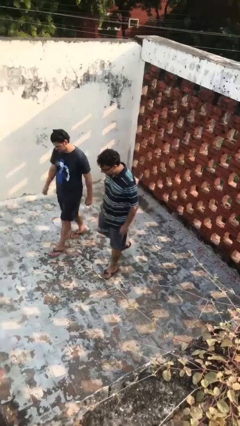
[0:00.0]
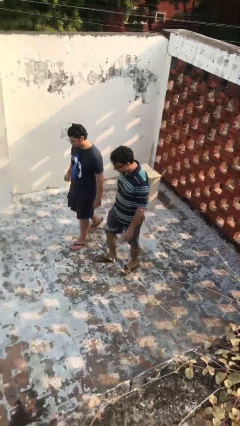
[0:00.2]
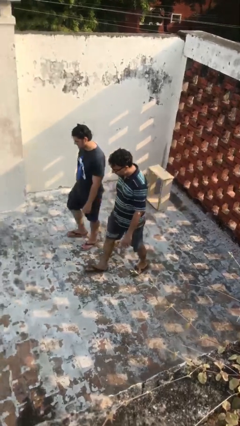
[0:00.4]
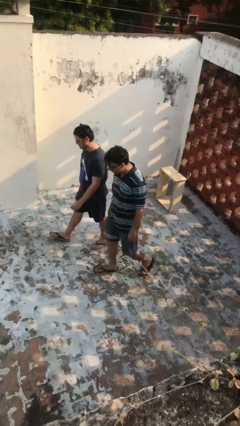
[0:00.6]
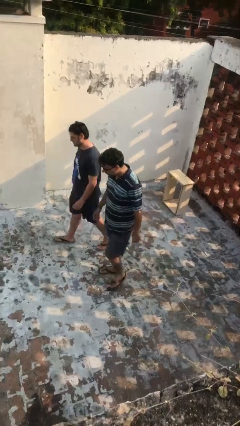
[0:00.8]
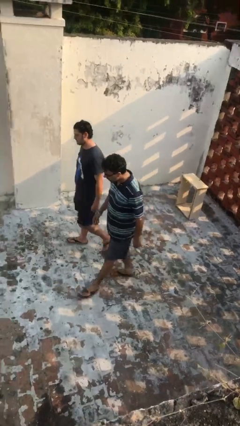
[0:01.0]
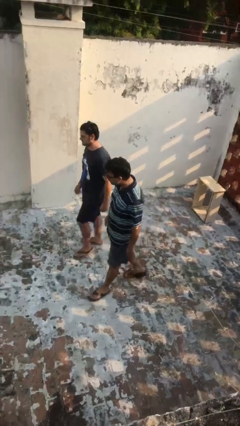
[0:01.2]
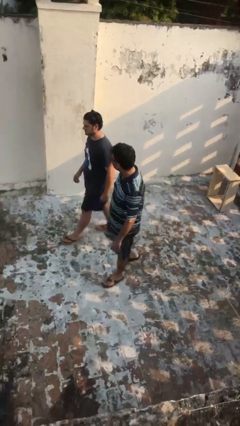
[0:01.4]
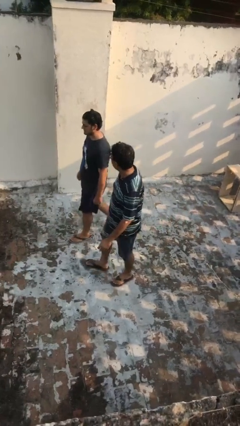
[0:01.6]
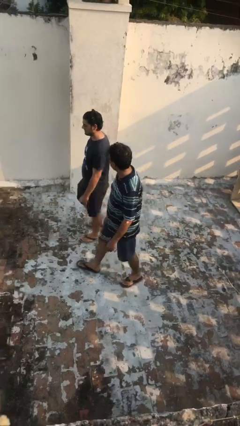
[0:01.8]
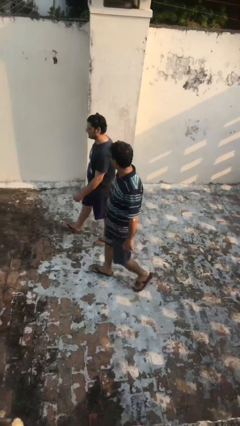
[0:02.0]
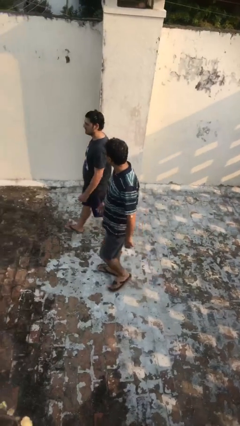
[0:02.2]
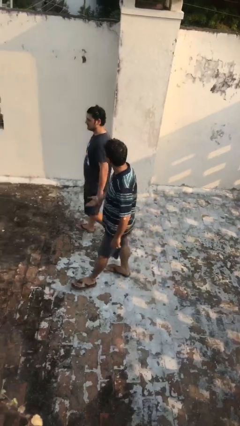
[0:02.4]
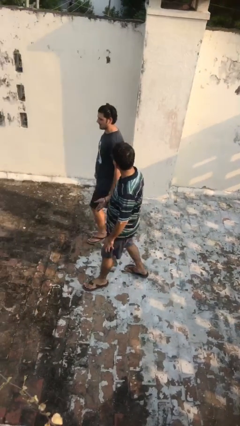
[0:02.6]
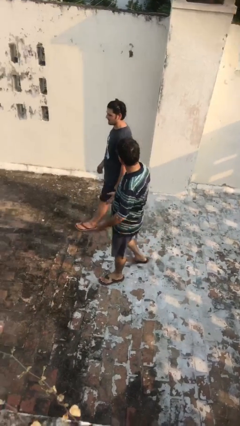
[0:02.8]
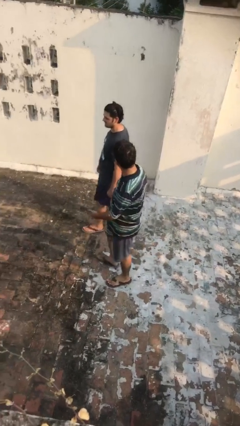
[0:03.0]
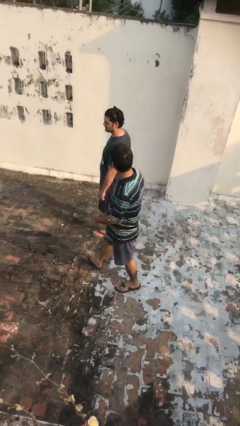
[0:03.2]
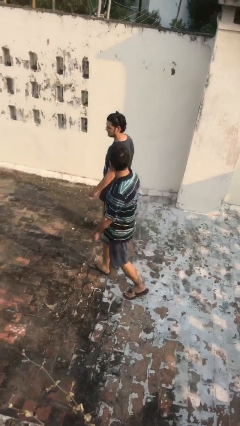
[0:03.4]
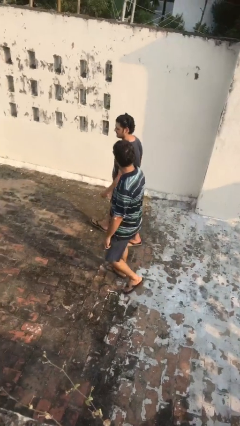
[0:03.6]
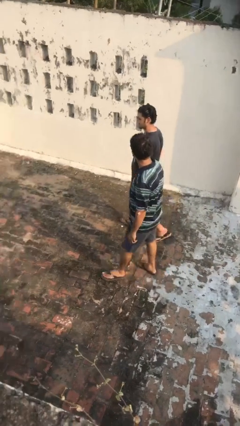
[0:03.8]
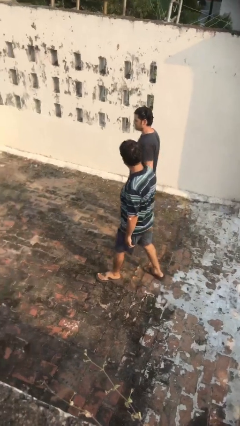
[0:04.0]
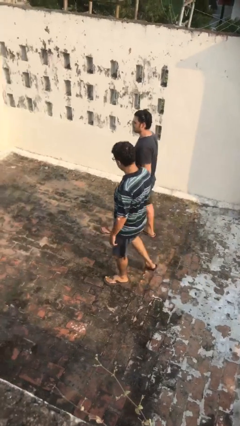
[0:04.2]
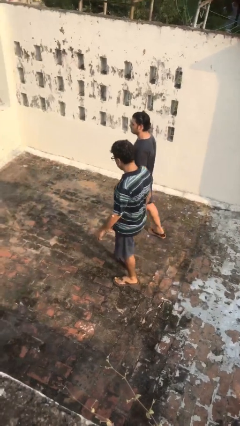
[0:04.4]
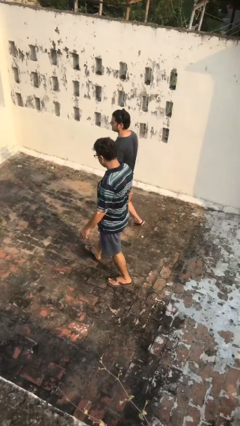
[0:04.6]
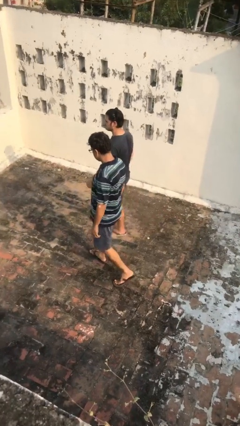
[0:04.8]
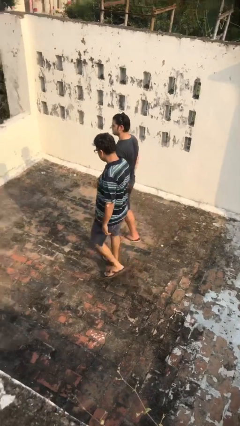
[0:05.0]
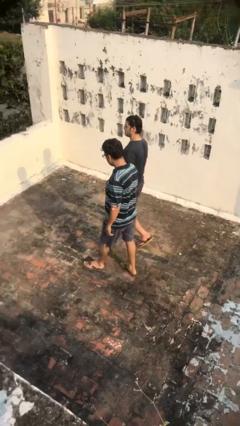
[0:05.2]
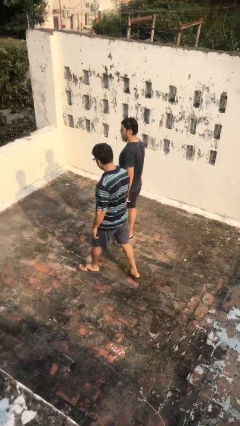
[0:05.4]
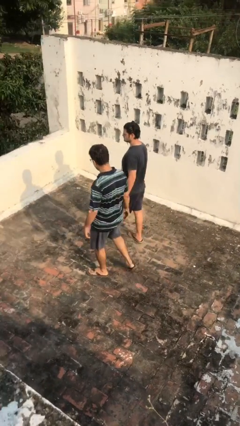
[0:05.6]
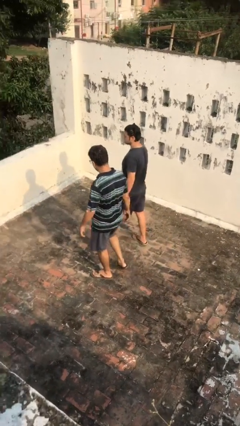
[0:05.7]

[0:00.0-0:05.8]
person talks to person

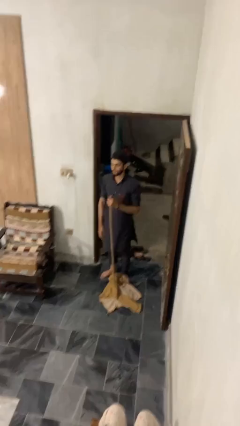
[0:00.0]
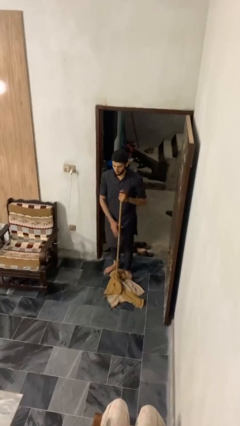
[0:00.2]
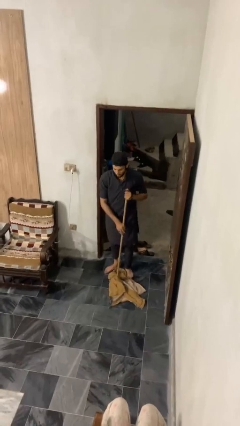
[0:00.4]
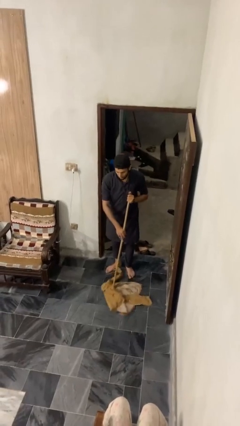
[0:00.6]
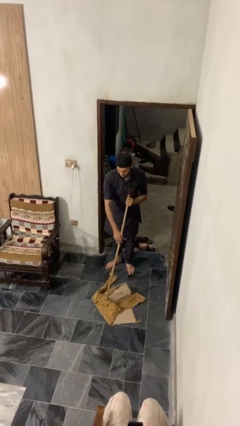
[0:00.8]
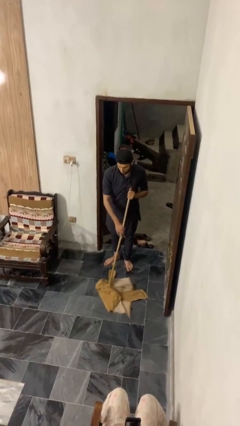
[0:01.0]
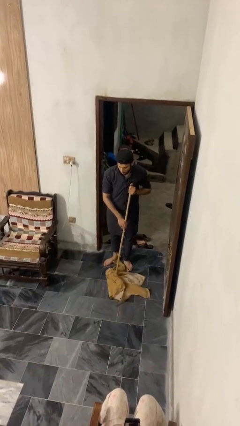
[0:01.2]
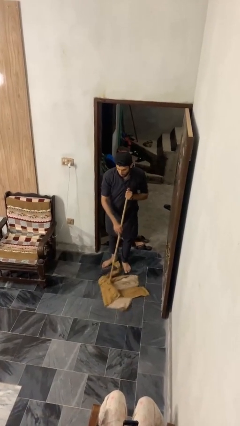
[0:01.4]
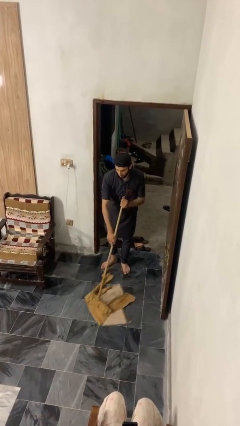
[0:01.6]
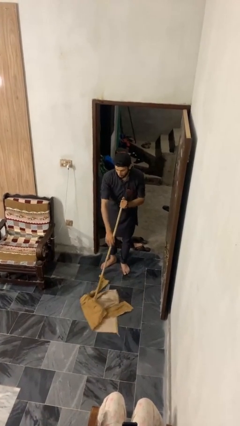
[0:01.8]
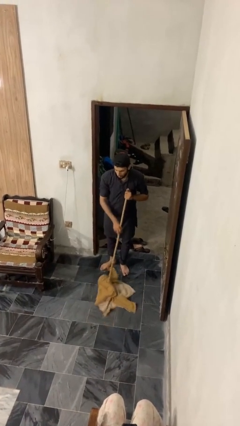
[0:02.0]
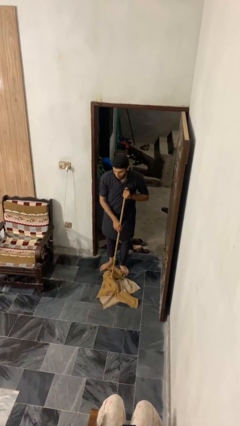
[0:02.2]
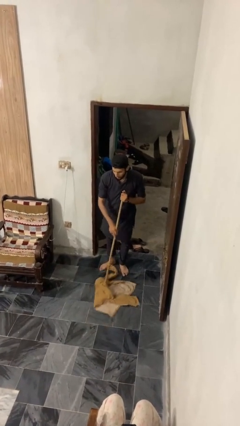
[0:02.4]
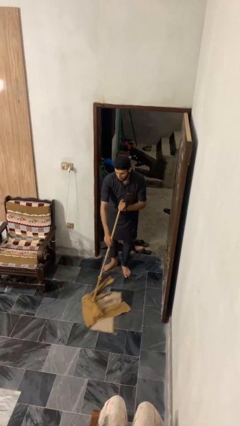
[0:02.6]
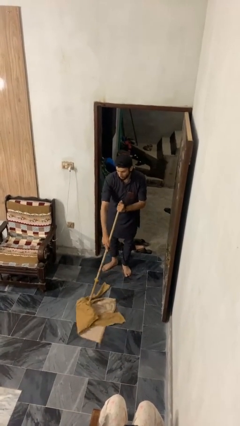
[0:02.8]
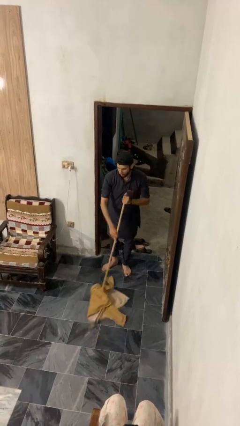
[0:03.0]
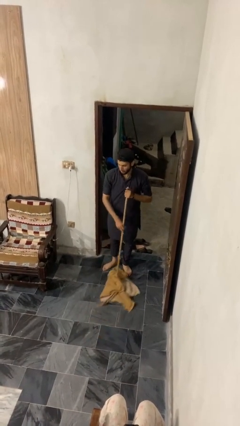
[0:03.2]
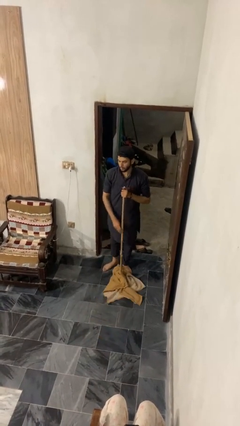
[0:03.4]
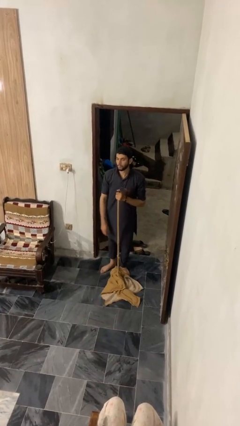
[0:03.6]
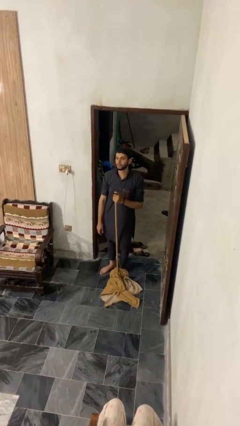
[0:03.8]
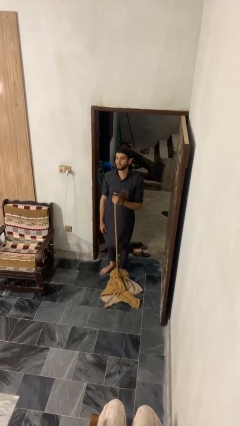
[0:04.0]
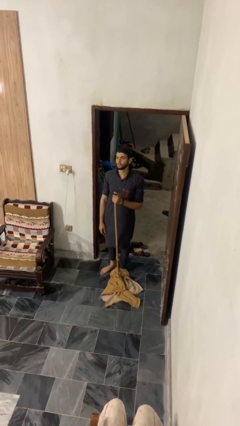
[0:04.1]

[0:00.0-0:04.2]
person mops

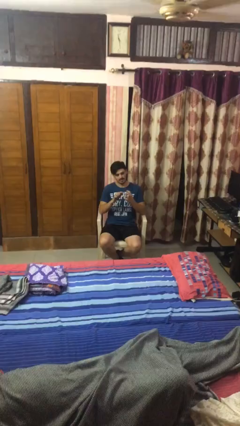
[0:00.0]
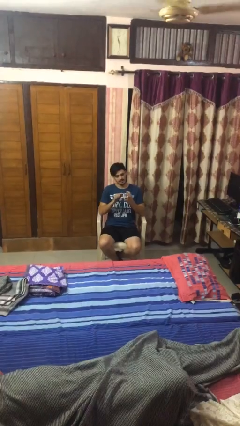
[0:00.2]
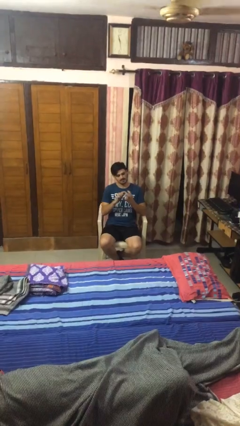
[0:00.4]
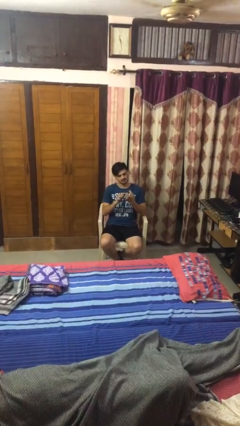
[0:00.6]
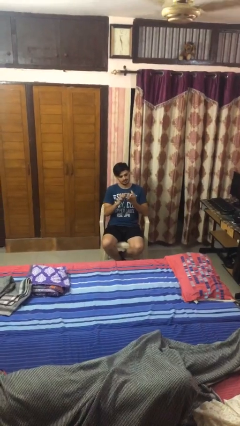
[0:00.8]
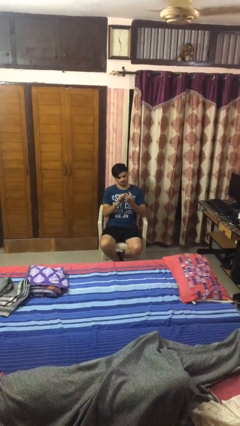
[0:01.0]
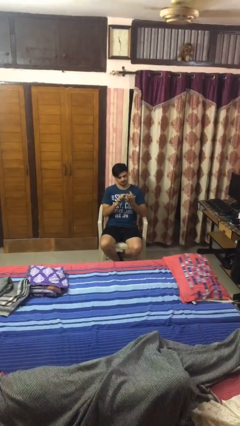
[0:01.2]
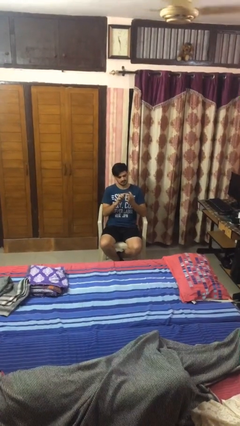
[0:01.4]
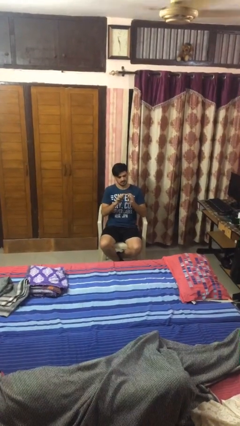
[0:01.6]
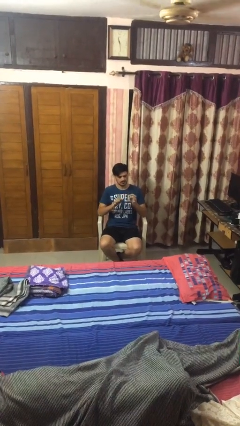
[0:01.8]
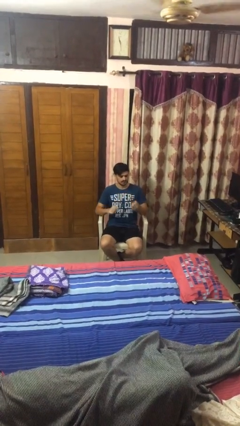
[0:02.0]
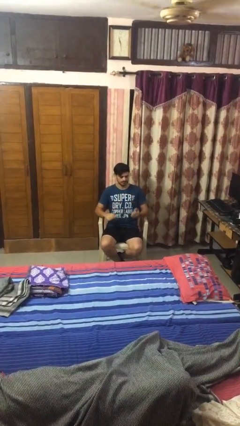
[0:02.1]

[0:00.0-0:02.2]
person files fingernails

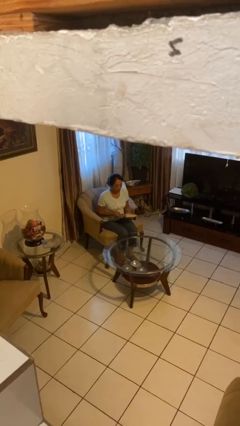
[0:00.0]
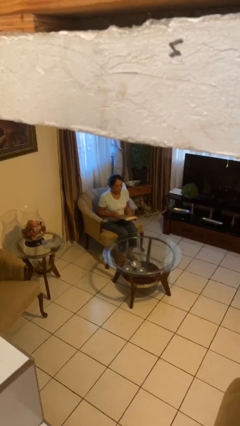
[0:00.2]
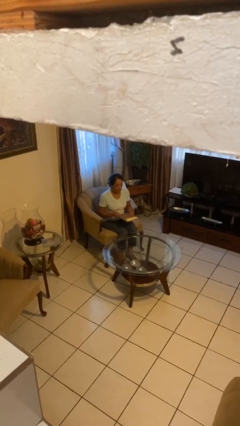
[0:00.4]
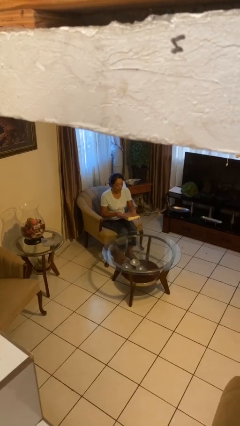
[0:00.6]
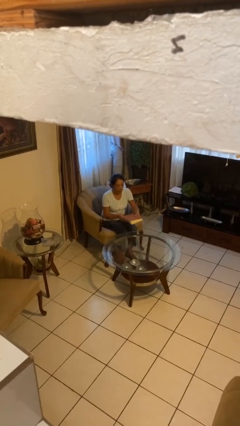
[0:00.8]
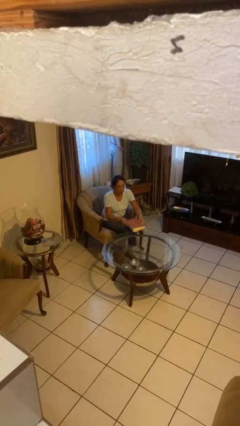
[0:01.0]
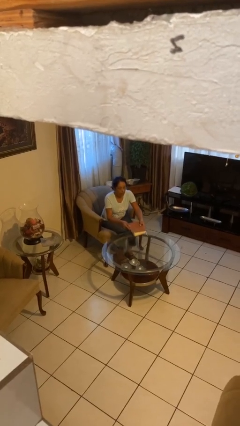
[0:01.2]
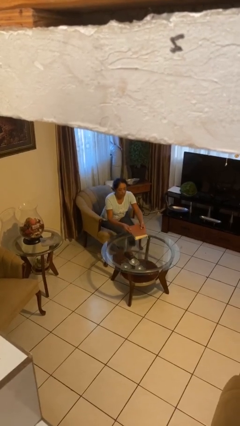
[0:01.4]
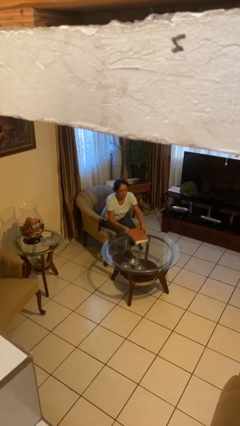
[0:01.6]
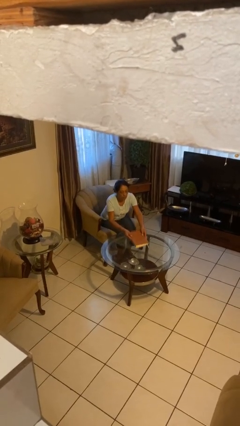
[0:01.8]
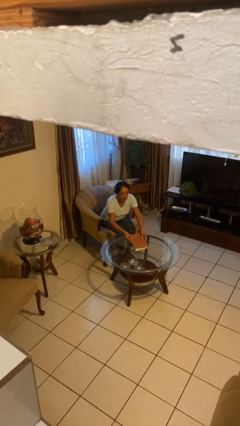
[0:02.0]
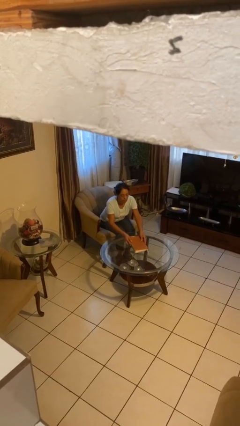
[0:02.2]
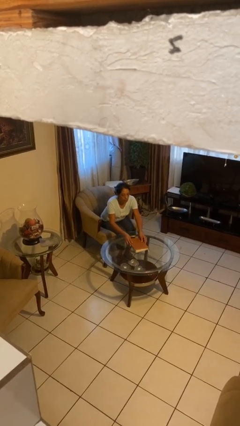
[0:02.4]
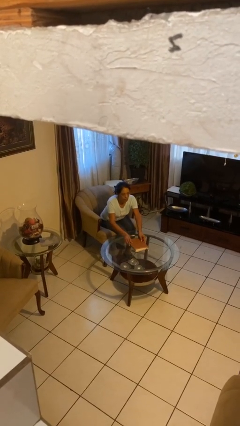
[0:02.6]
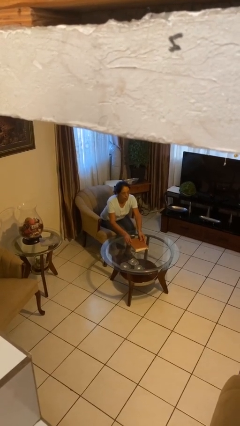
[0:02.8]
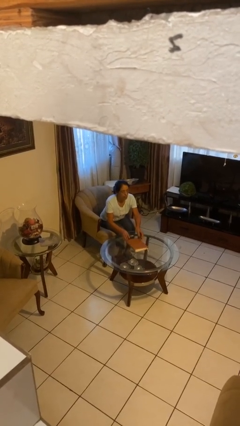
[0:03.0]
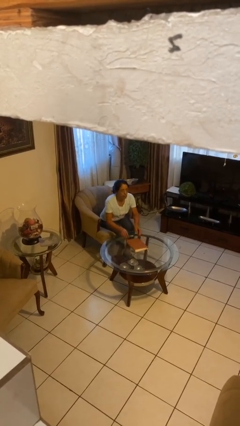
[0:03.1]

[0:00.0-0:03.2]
person puts down object on table

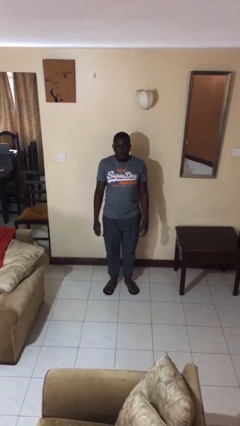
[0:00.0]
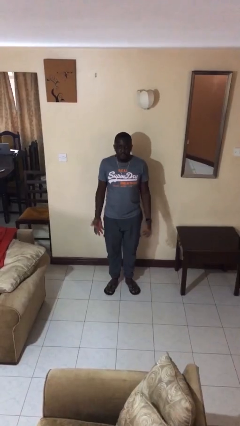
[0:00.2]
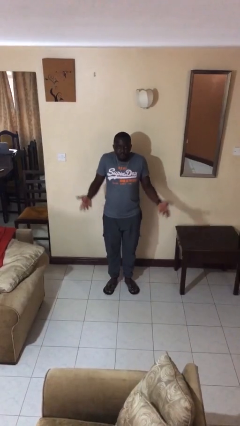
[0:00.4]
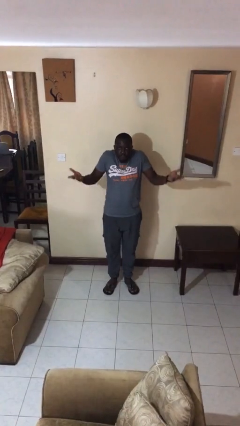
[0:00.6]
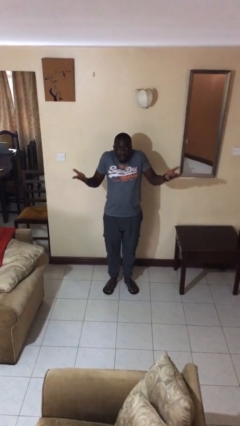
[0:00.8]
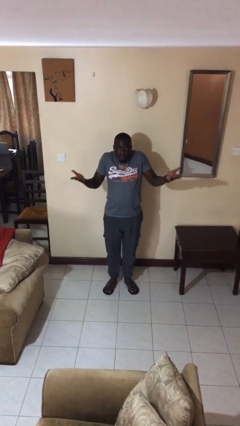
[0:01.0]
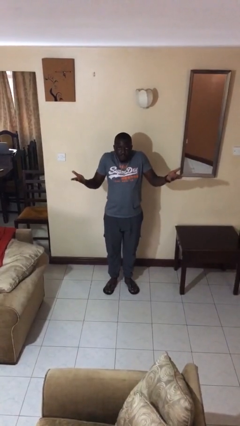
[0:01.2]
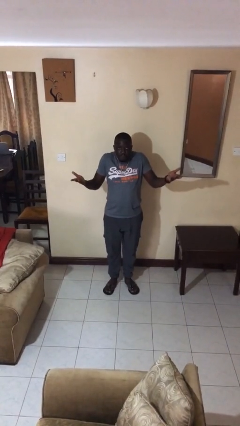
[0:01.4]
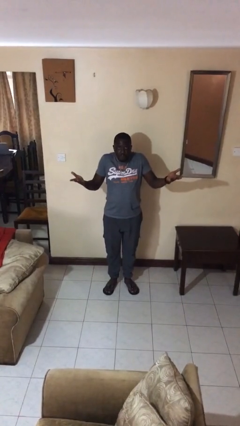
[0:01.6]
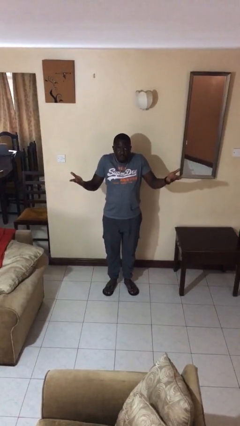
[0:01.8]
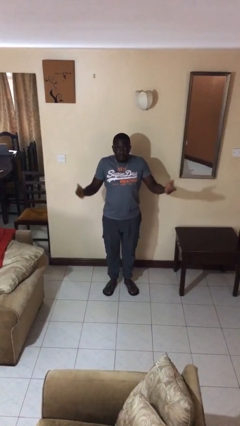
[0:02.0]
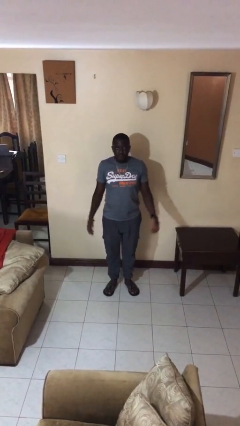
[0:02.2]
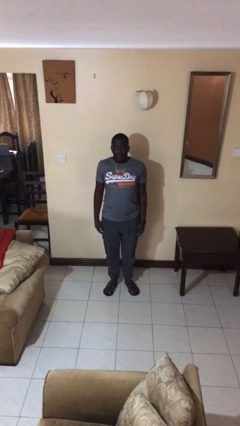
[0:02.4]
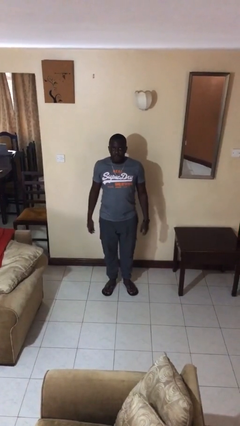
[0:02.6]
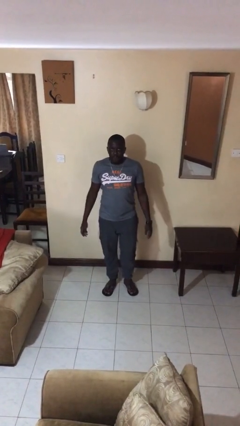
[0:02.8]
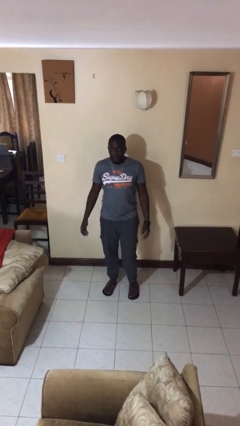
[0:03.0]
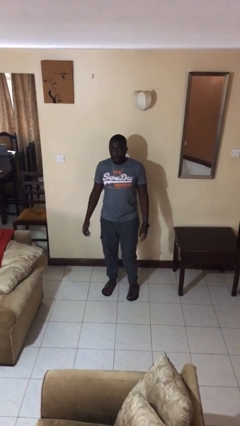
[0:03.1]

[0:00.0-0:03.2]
person shrugs
